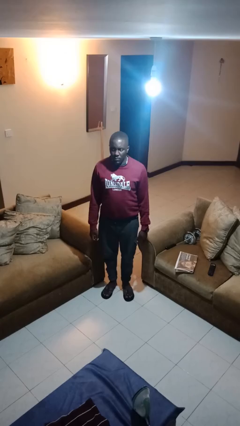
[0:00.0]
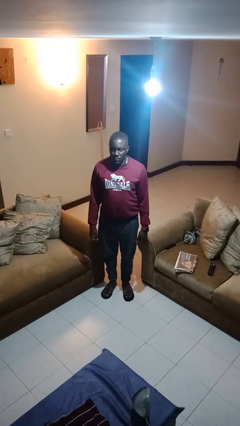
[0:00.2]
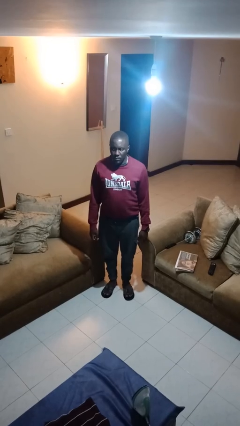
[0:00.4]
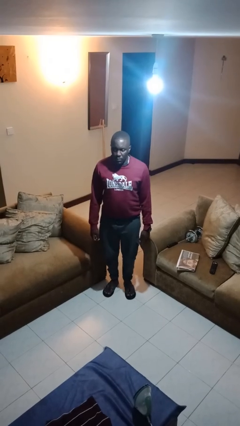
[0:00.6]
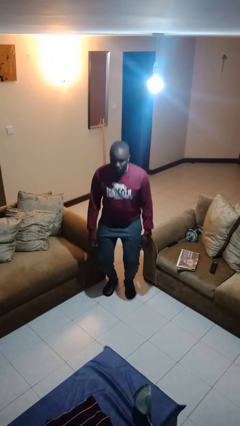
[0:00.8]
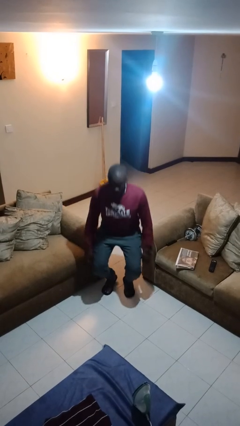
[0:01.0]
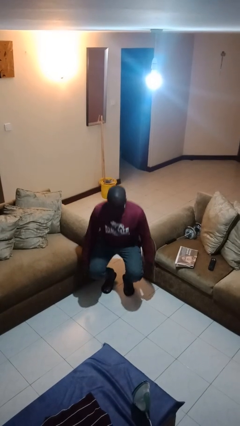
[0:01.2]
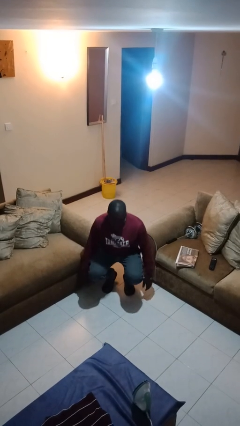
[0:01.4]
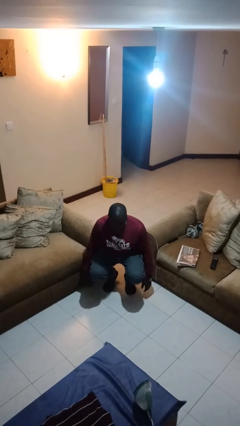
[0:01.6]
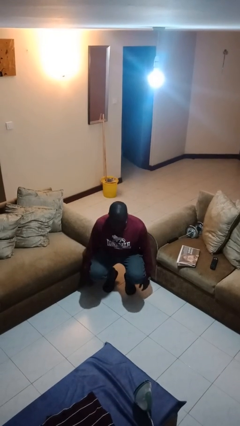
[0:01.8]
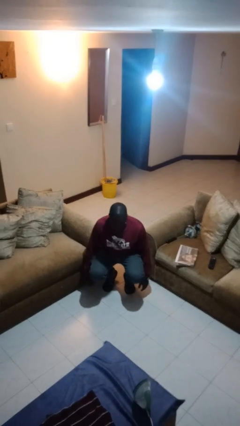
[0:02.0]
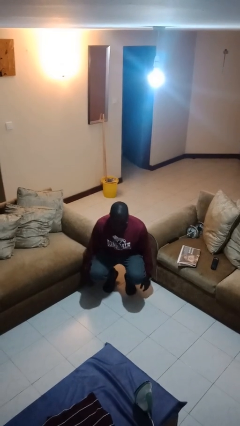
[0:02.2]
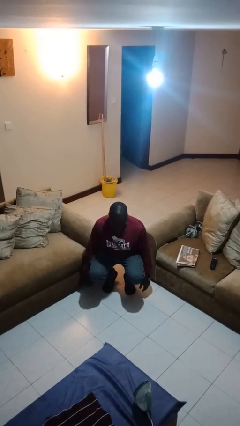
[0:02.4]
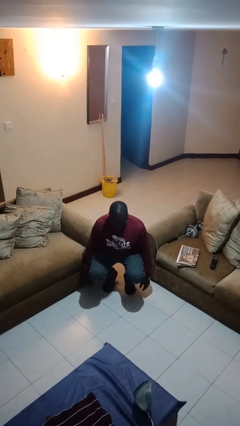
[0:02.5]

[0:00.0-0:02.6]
person squats

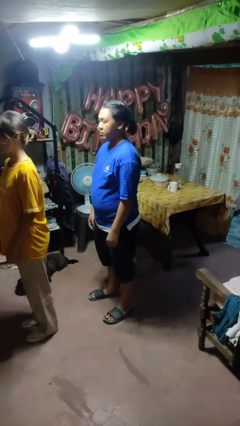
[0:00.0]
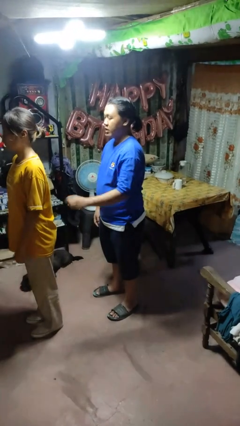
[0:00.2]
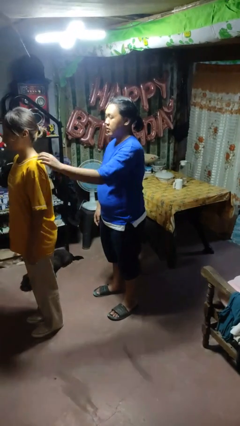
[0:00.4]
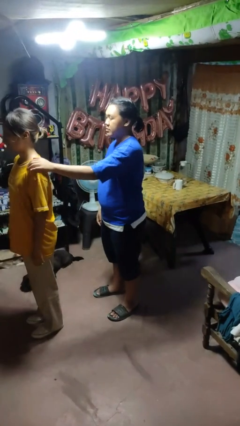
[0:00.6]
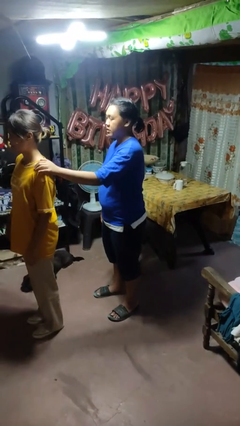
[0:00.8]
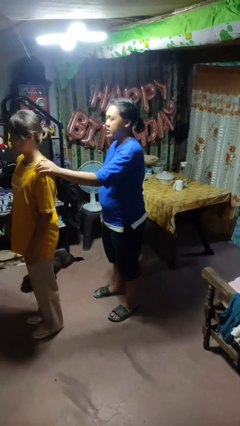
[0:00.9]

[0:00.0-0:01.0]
person grabs person by shoulder

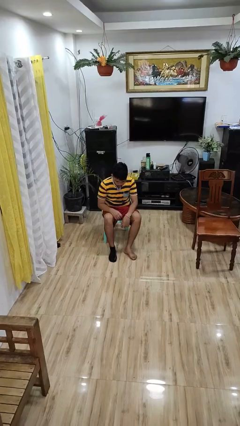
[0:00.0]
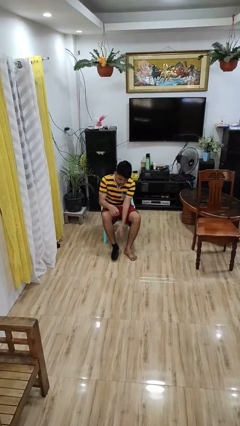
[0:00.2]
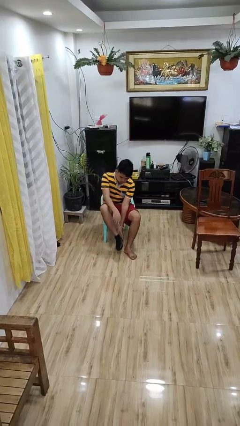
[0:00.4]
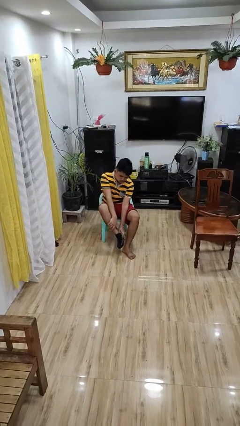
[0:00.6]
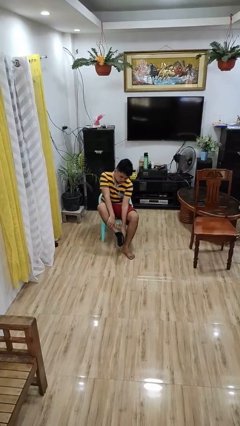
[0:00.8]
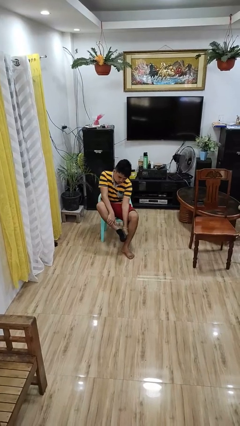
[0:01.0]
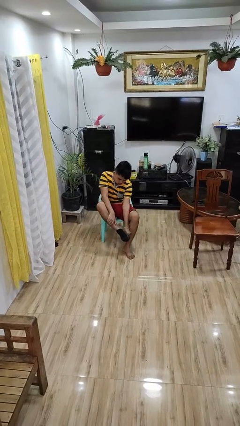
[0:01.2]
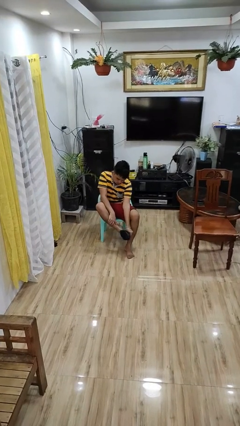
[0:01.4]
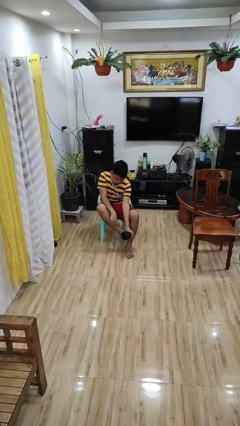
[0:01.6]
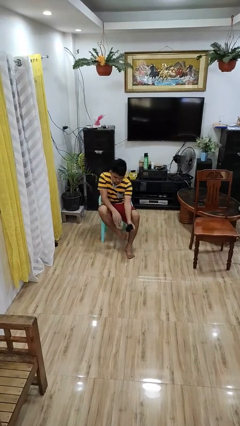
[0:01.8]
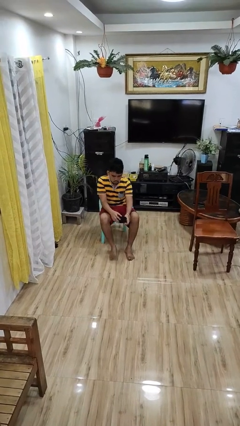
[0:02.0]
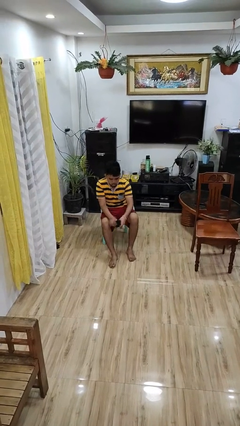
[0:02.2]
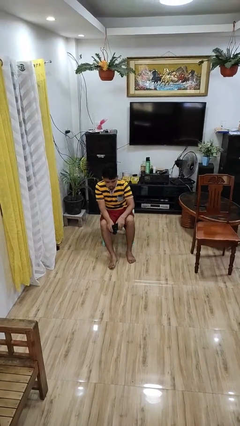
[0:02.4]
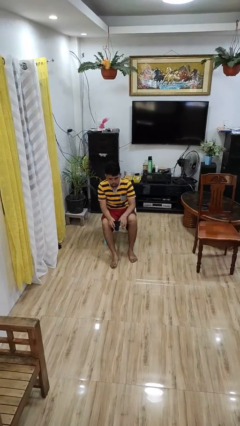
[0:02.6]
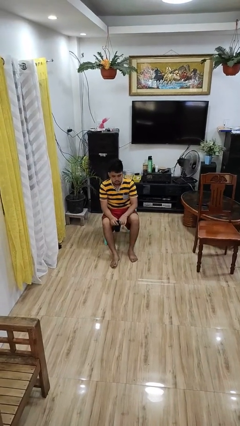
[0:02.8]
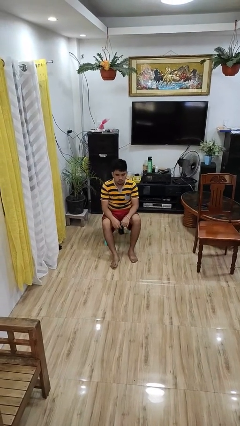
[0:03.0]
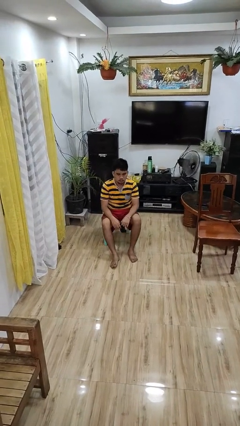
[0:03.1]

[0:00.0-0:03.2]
person takes off socks

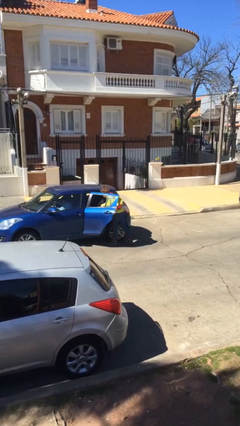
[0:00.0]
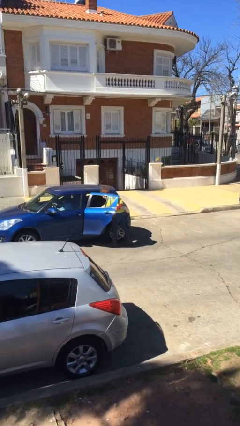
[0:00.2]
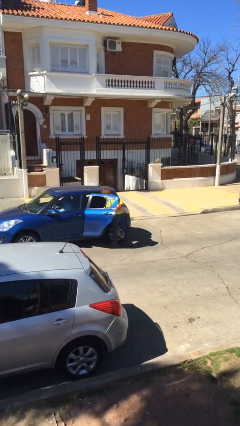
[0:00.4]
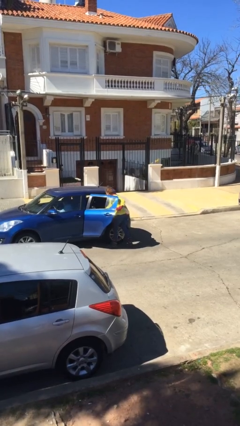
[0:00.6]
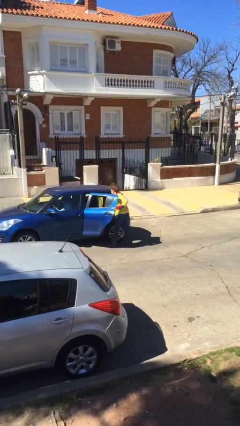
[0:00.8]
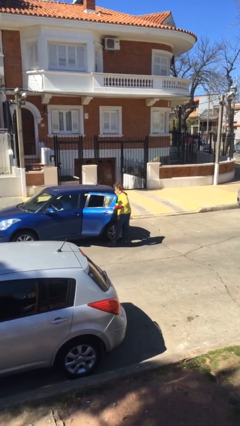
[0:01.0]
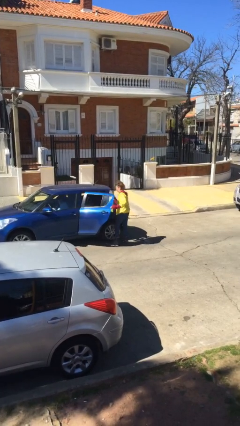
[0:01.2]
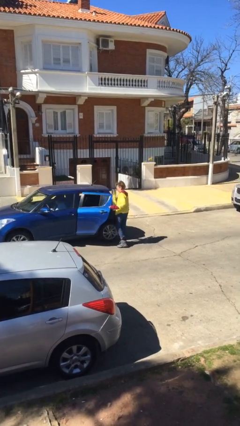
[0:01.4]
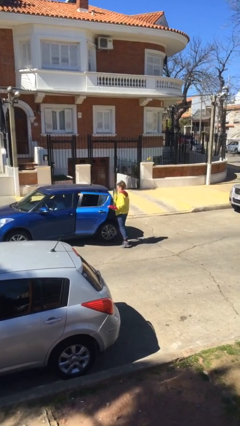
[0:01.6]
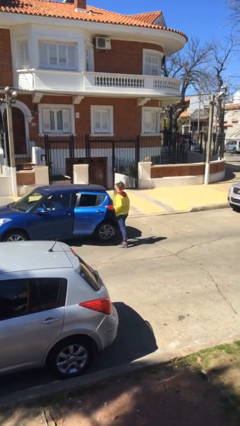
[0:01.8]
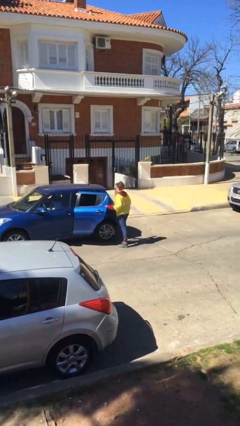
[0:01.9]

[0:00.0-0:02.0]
person unloads car

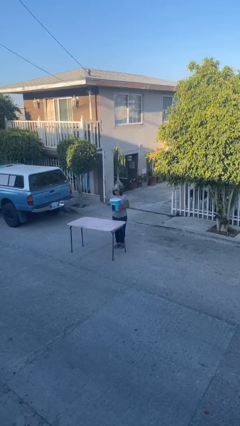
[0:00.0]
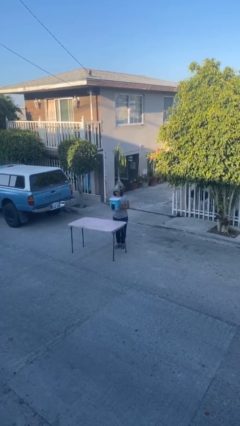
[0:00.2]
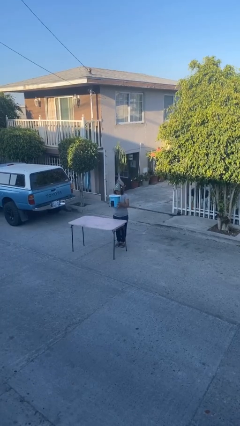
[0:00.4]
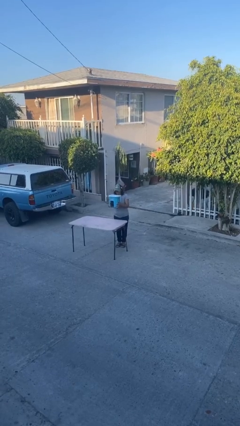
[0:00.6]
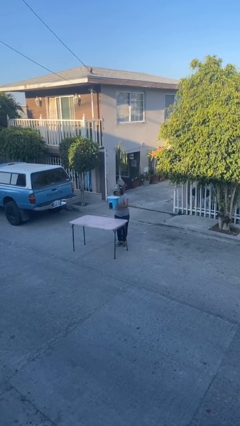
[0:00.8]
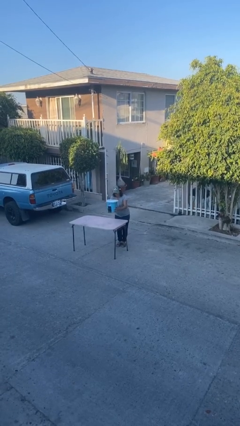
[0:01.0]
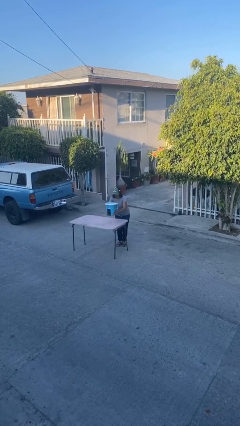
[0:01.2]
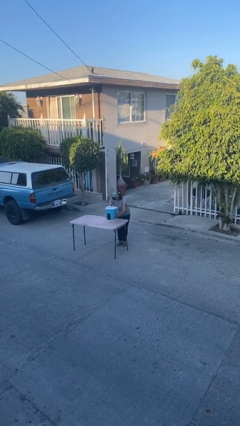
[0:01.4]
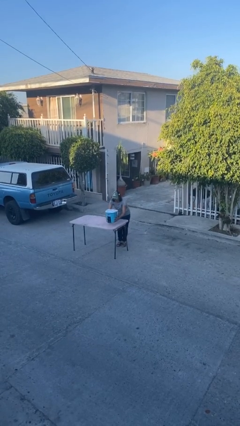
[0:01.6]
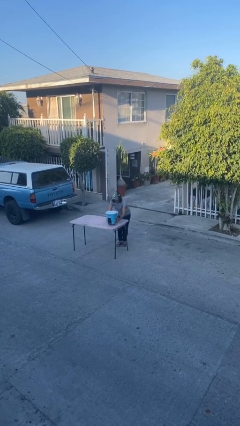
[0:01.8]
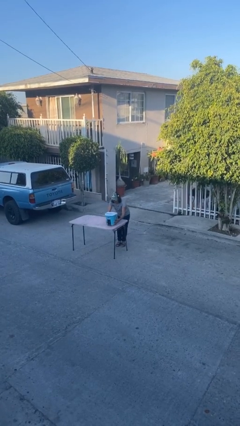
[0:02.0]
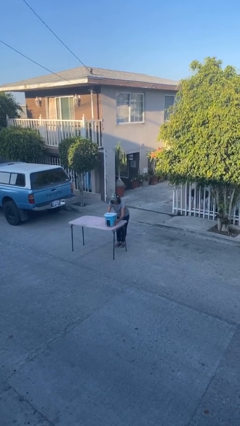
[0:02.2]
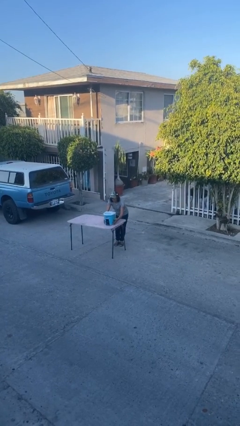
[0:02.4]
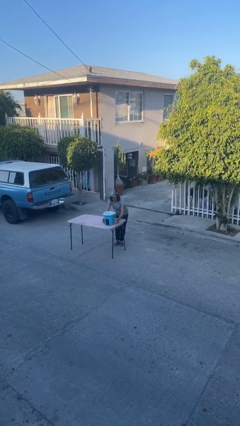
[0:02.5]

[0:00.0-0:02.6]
person puts down object on table

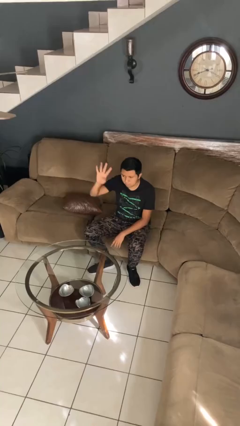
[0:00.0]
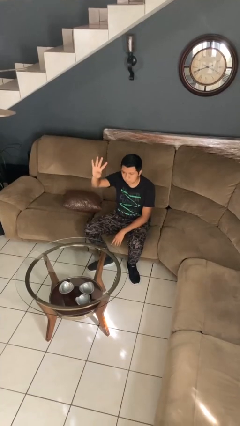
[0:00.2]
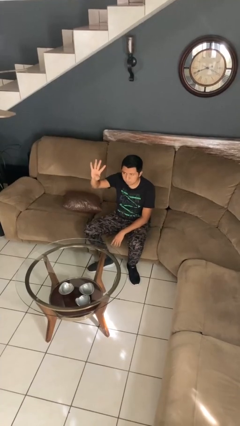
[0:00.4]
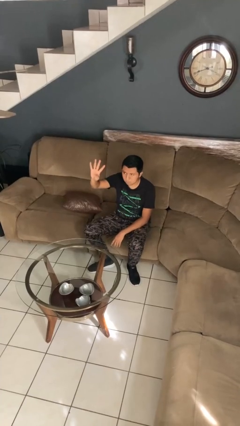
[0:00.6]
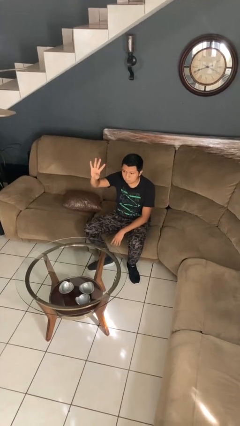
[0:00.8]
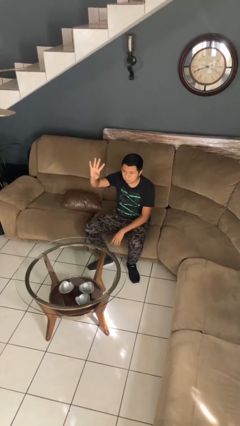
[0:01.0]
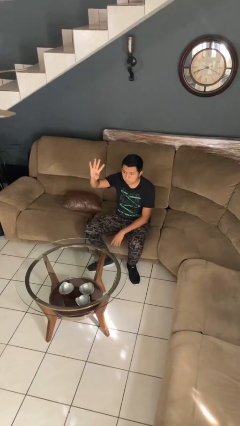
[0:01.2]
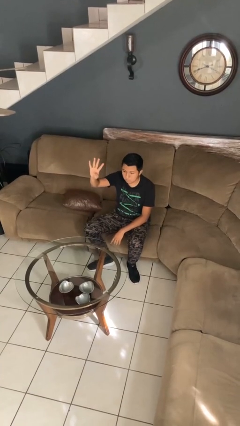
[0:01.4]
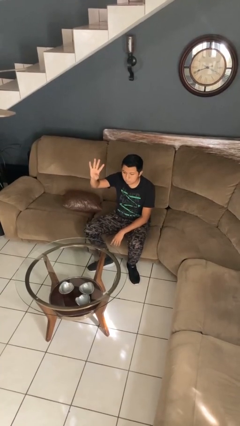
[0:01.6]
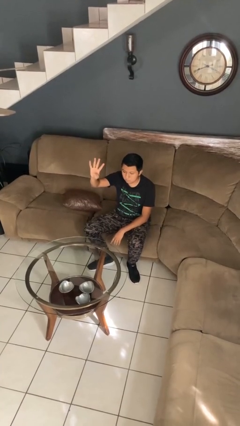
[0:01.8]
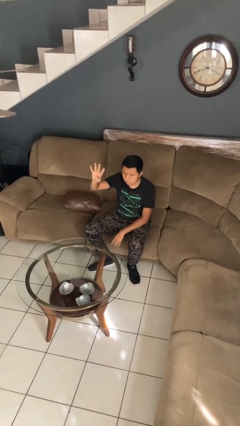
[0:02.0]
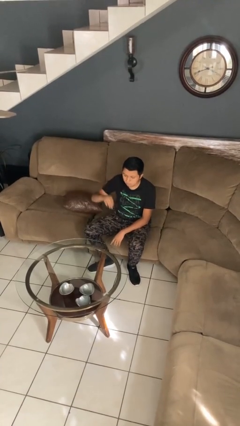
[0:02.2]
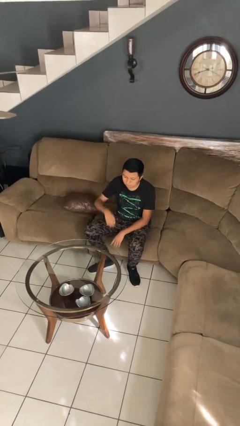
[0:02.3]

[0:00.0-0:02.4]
person gestures number four

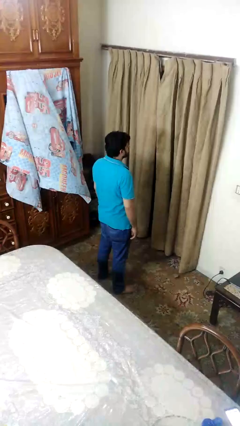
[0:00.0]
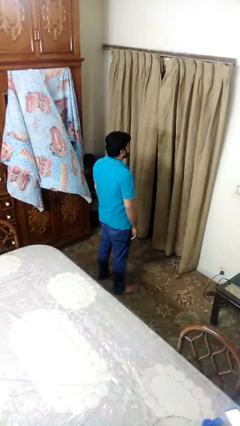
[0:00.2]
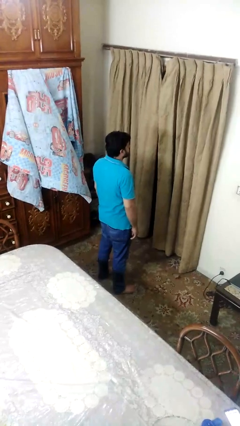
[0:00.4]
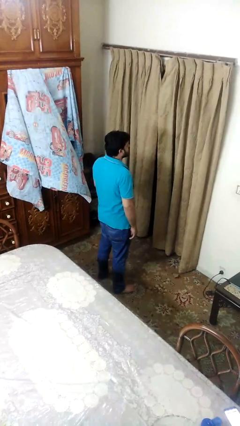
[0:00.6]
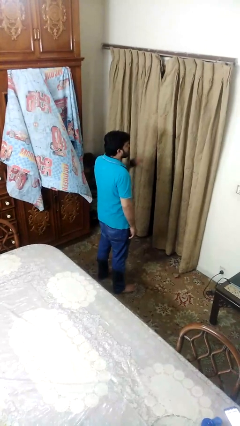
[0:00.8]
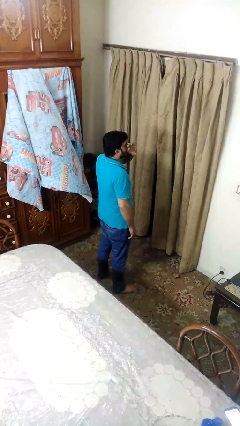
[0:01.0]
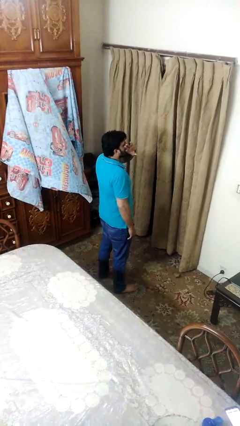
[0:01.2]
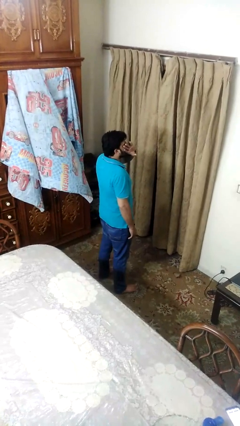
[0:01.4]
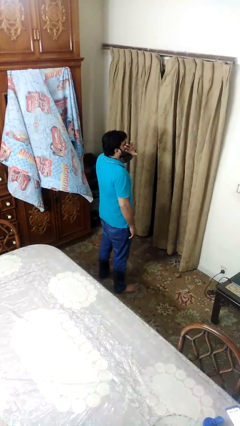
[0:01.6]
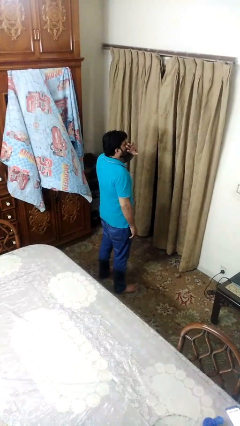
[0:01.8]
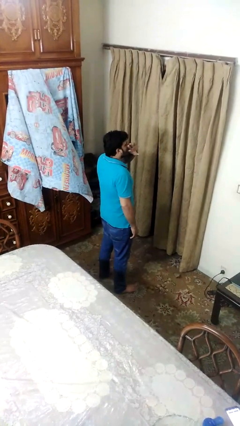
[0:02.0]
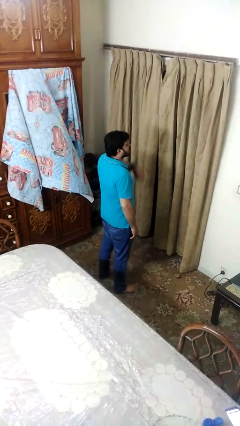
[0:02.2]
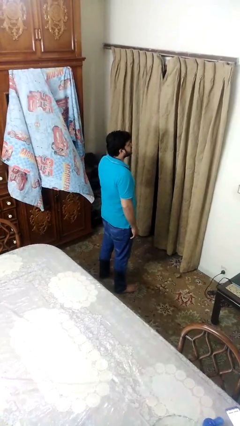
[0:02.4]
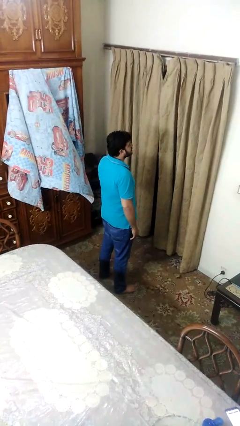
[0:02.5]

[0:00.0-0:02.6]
person yawns

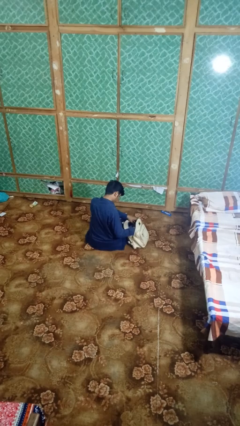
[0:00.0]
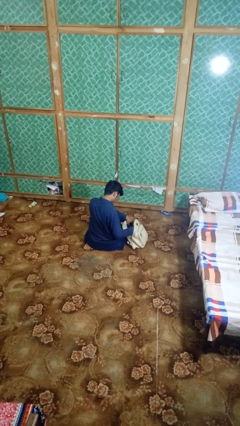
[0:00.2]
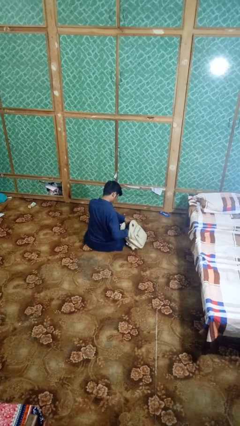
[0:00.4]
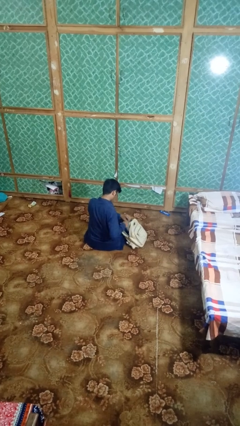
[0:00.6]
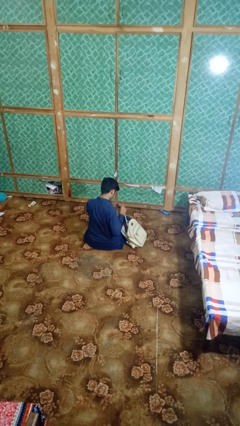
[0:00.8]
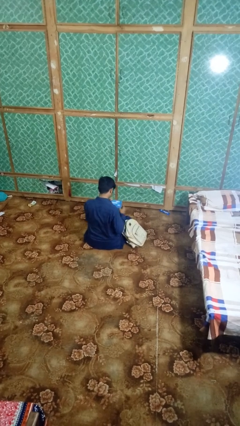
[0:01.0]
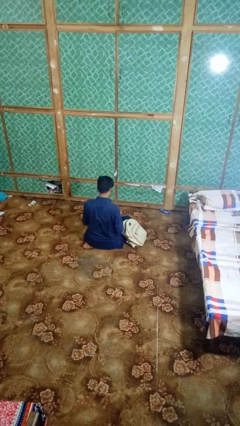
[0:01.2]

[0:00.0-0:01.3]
person takes object from backpack
